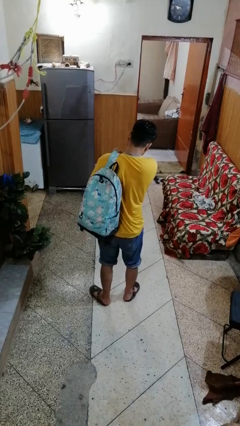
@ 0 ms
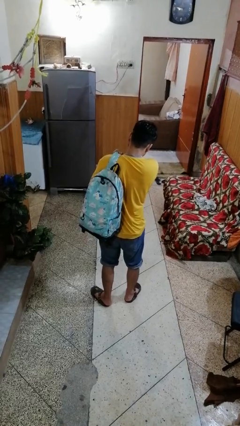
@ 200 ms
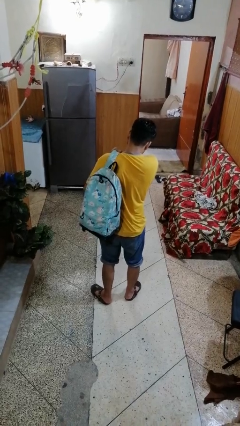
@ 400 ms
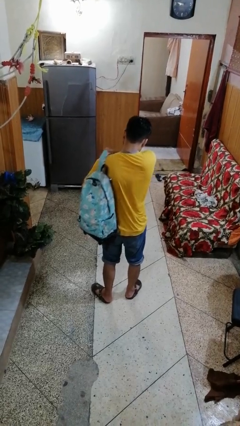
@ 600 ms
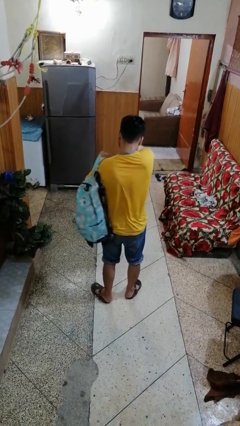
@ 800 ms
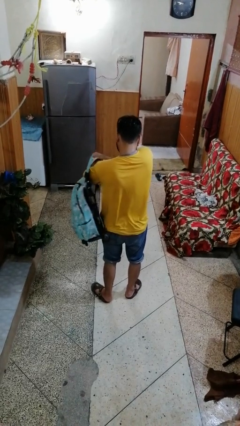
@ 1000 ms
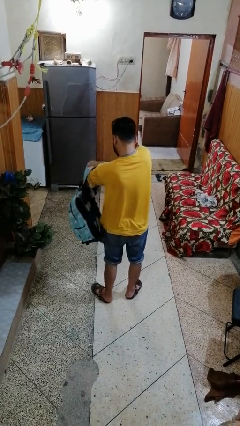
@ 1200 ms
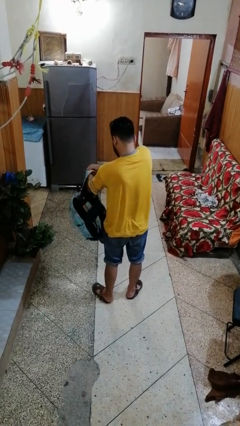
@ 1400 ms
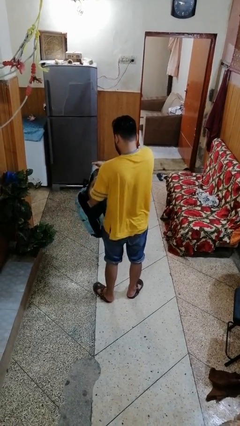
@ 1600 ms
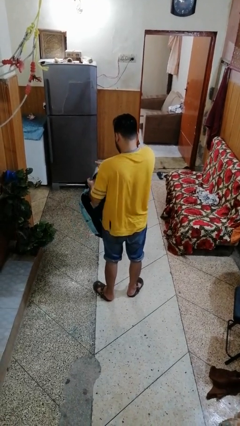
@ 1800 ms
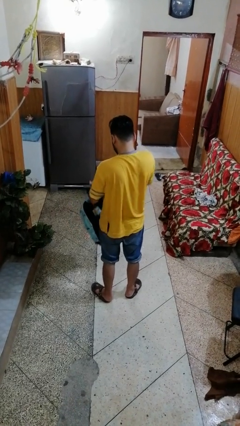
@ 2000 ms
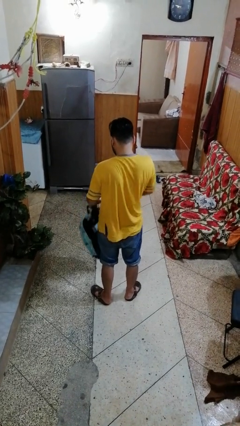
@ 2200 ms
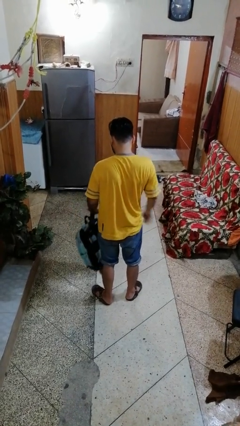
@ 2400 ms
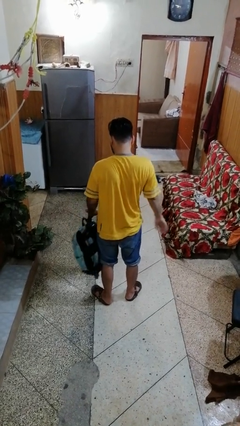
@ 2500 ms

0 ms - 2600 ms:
person takes off backpack

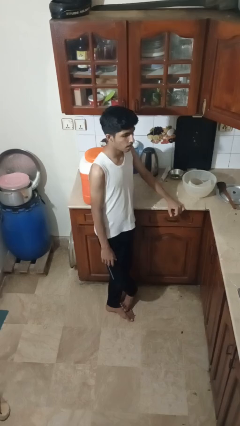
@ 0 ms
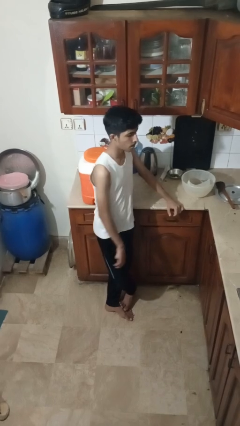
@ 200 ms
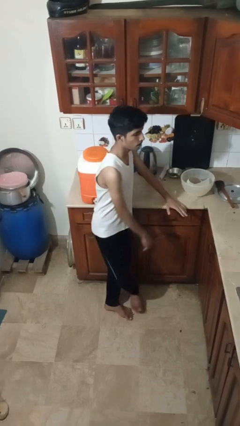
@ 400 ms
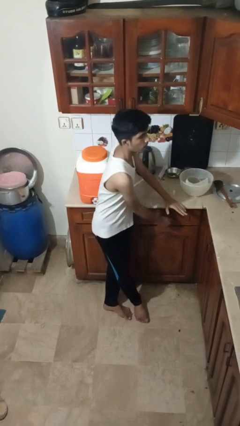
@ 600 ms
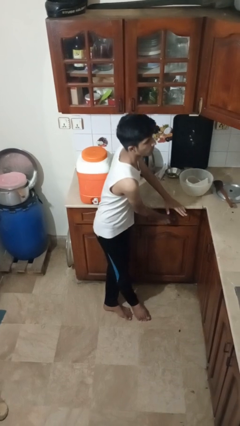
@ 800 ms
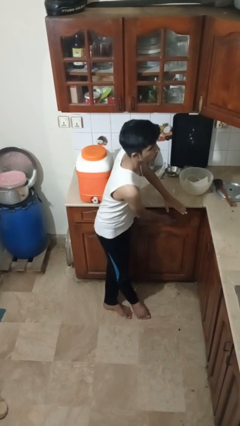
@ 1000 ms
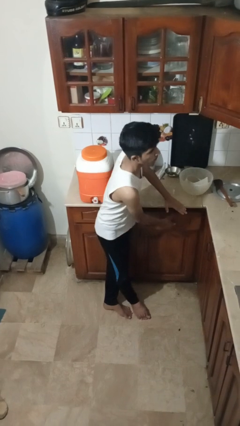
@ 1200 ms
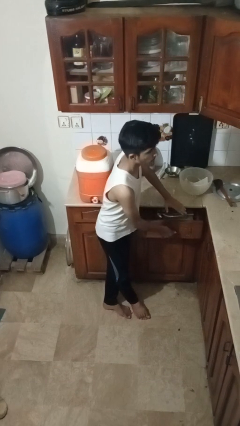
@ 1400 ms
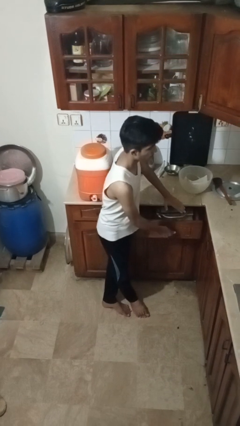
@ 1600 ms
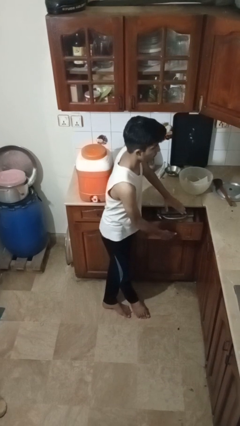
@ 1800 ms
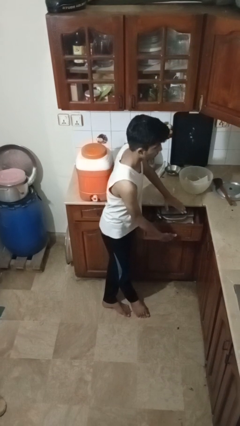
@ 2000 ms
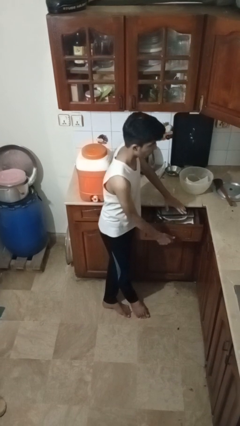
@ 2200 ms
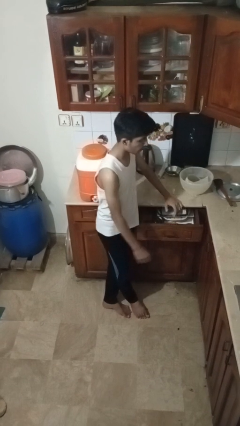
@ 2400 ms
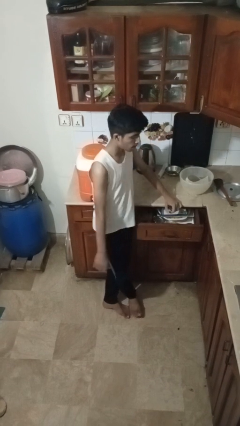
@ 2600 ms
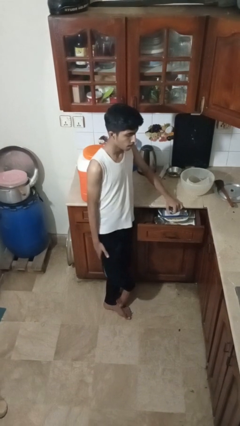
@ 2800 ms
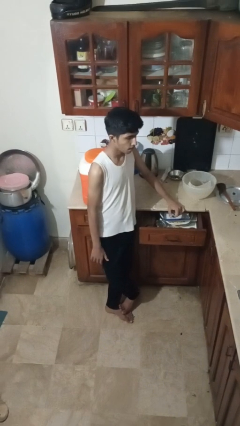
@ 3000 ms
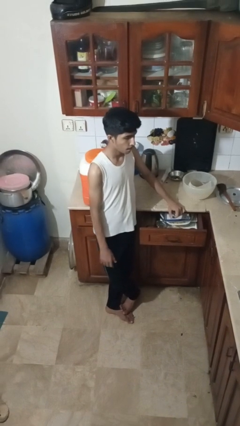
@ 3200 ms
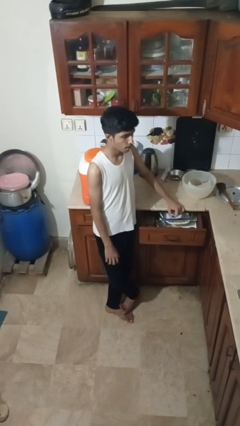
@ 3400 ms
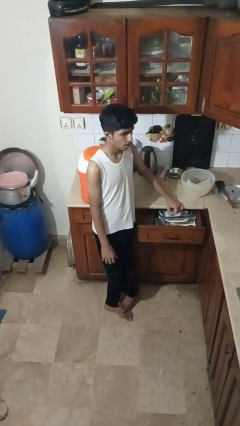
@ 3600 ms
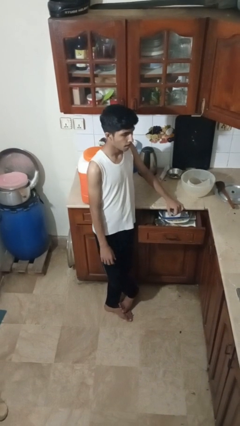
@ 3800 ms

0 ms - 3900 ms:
person opens kitchen drawer

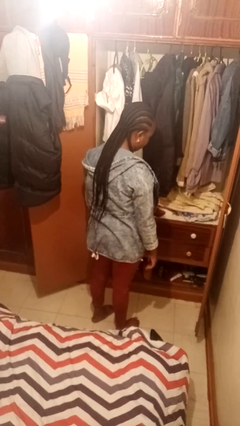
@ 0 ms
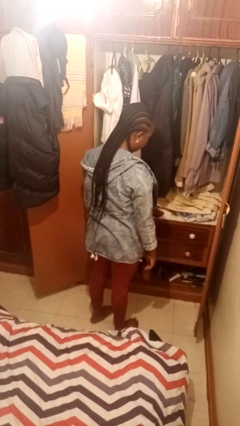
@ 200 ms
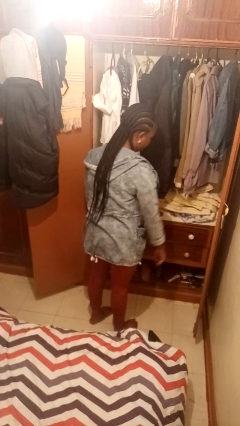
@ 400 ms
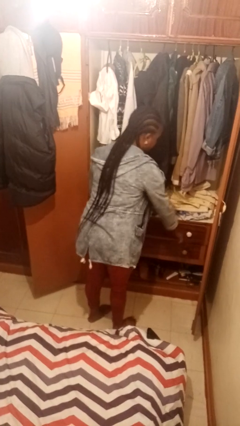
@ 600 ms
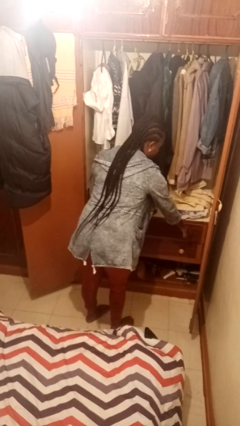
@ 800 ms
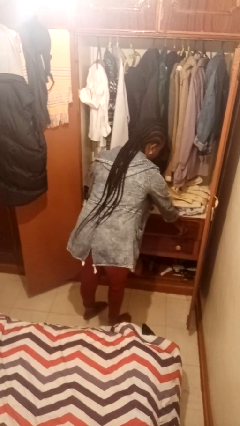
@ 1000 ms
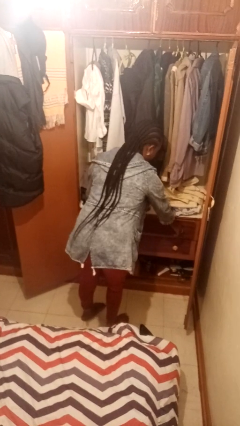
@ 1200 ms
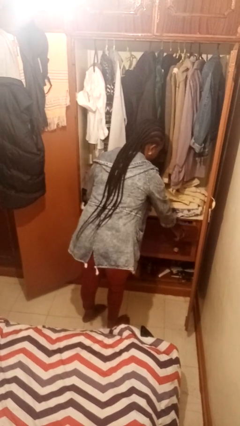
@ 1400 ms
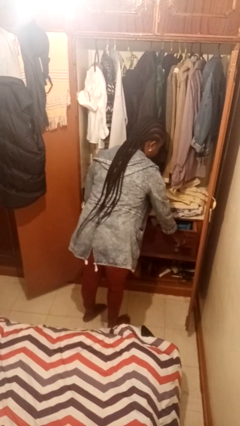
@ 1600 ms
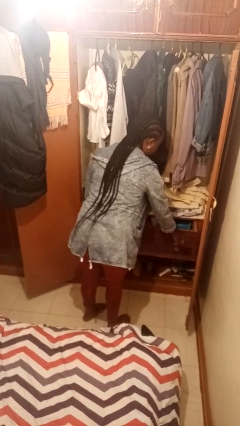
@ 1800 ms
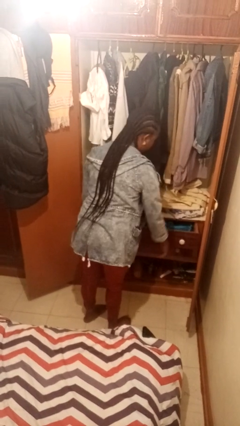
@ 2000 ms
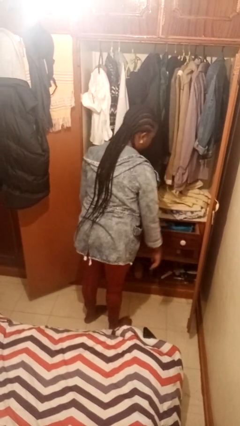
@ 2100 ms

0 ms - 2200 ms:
person opens dresser drawer

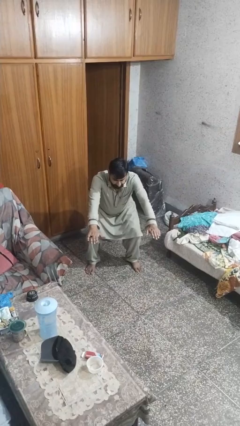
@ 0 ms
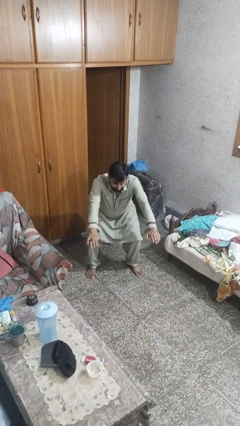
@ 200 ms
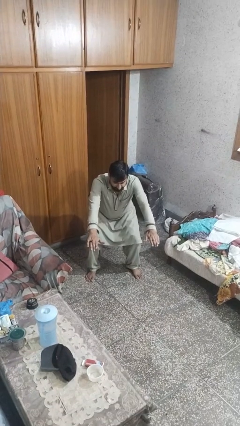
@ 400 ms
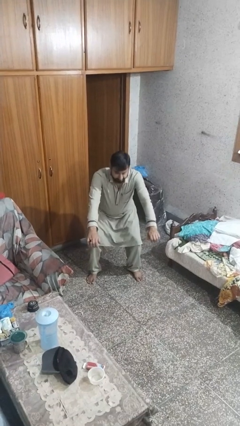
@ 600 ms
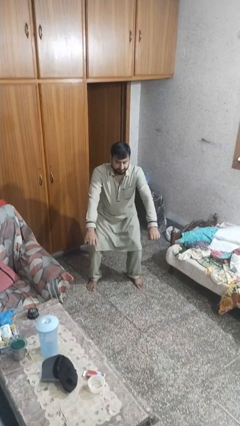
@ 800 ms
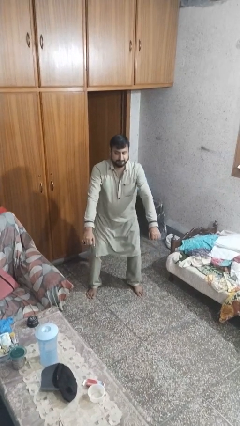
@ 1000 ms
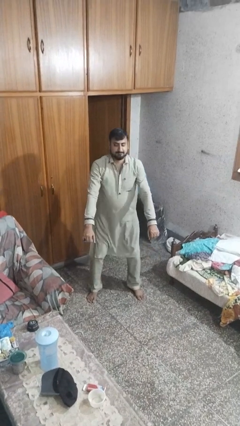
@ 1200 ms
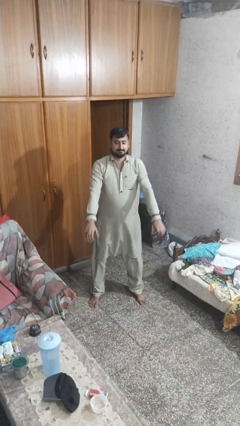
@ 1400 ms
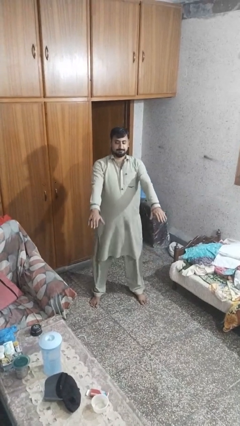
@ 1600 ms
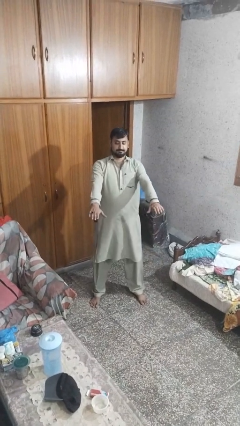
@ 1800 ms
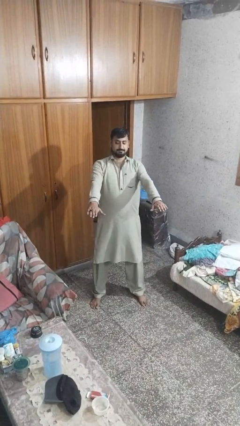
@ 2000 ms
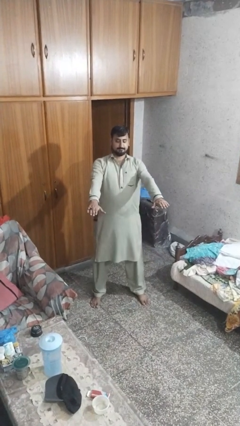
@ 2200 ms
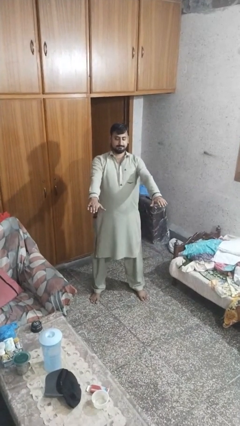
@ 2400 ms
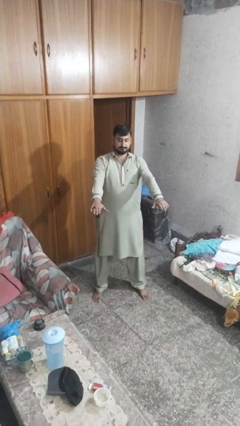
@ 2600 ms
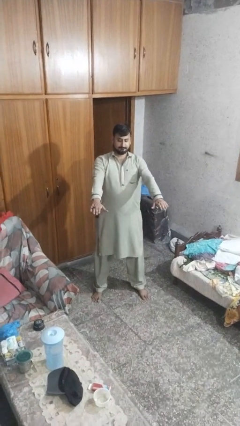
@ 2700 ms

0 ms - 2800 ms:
person stands up

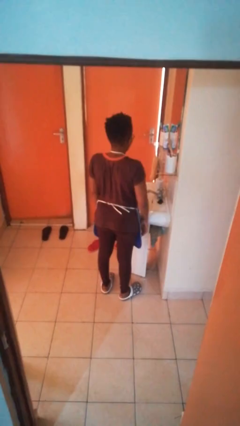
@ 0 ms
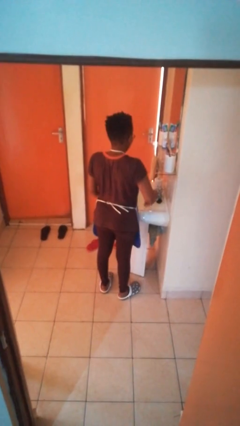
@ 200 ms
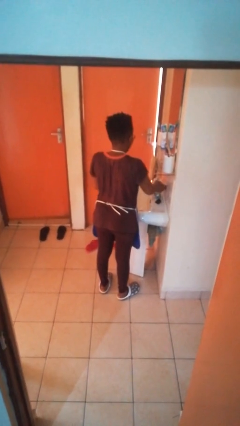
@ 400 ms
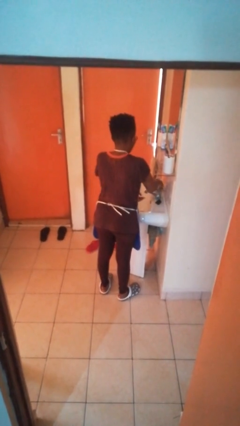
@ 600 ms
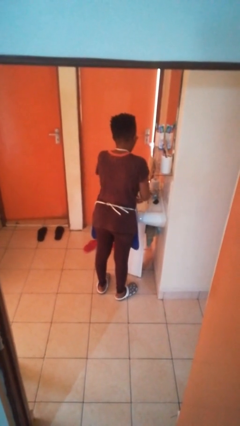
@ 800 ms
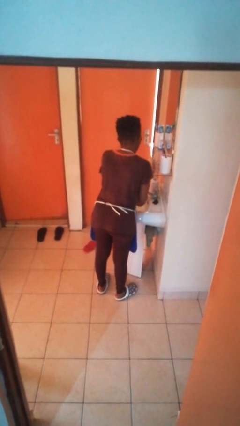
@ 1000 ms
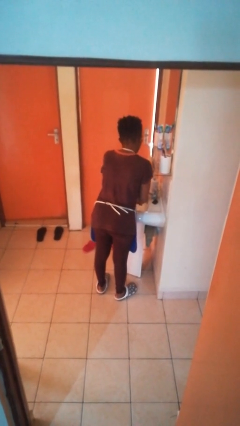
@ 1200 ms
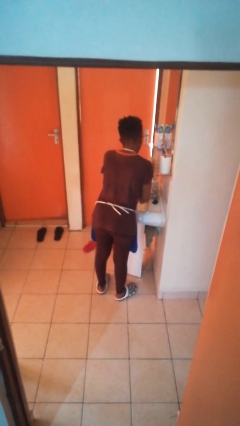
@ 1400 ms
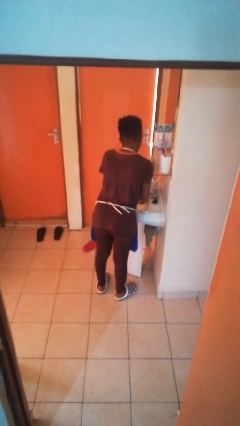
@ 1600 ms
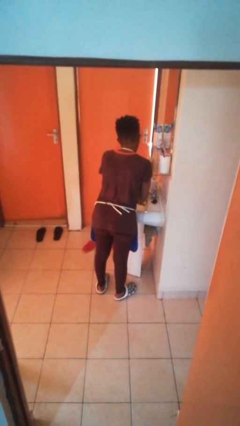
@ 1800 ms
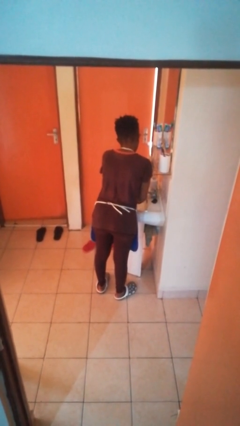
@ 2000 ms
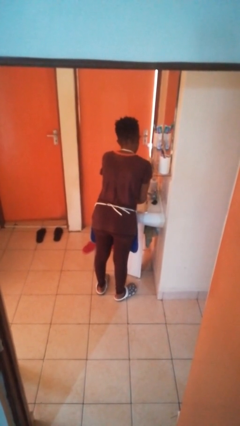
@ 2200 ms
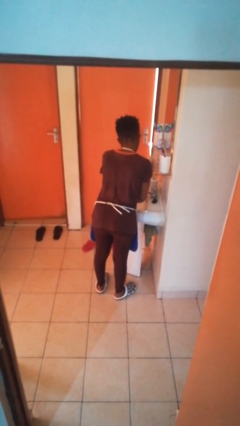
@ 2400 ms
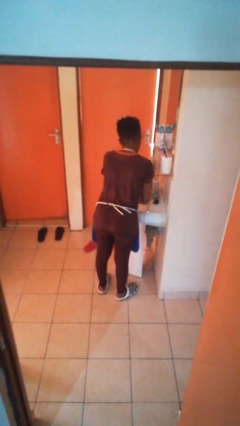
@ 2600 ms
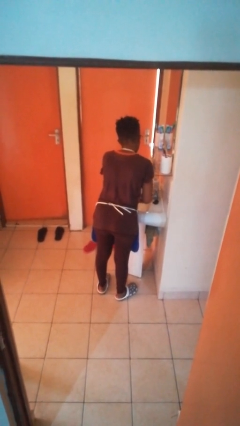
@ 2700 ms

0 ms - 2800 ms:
person washes hands

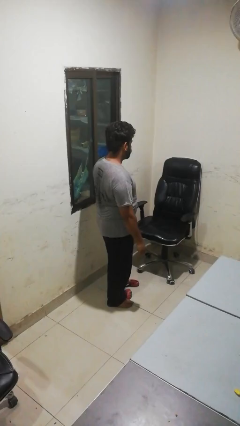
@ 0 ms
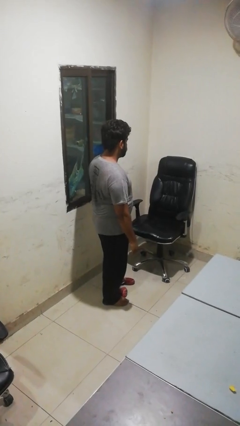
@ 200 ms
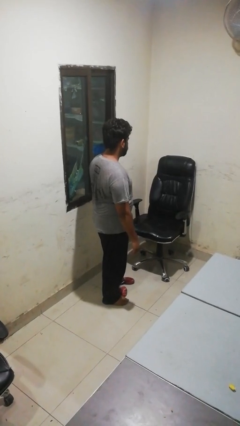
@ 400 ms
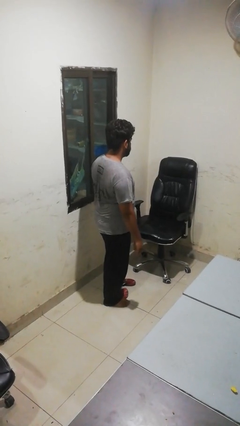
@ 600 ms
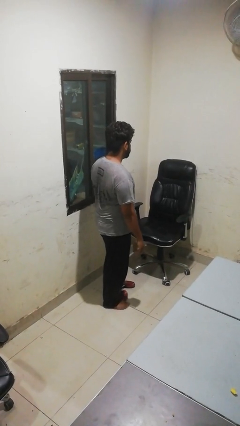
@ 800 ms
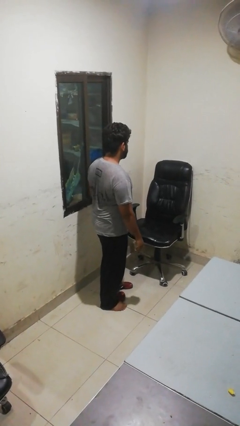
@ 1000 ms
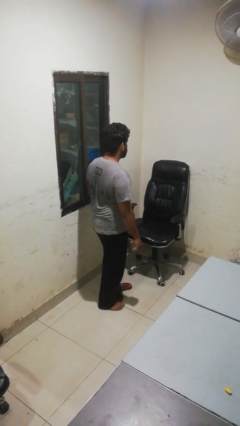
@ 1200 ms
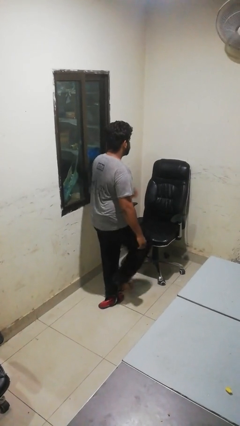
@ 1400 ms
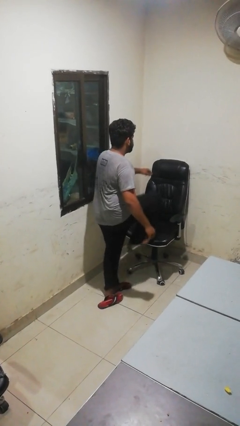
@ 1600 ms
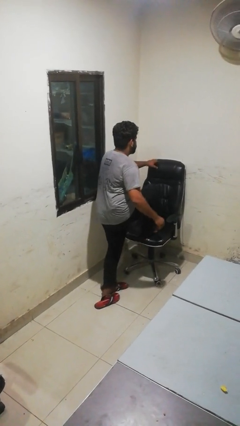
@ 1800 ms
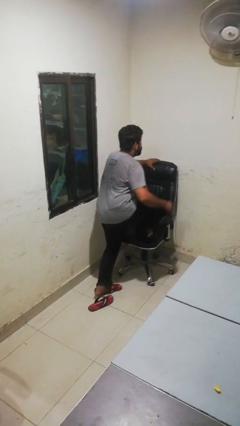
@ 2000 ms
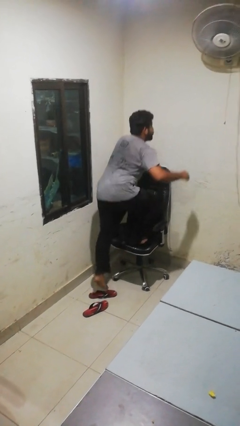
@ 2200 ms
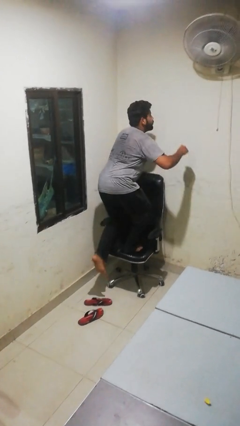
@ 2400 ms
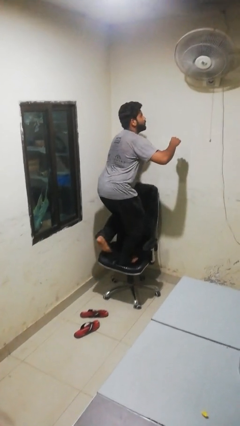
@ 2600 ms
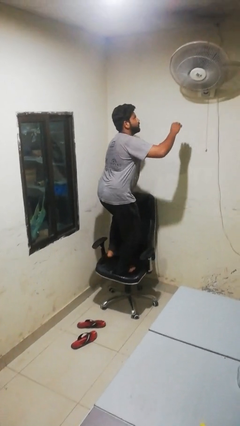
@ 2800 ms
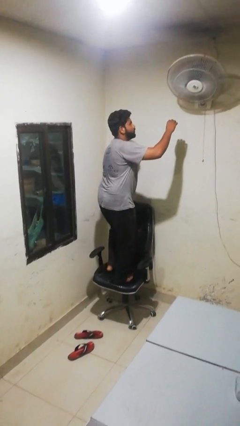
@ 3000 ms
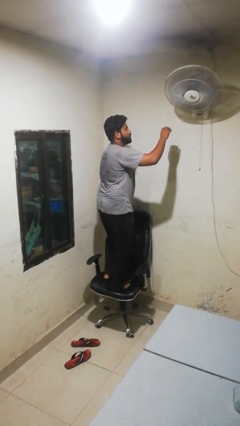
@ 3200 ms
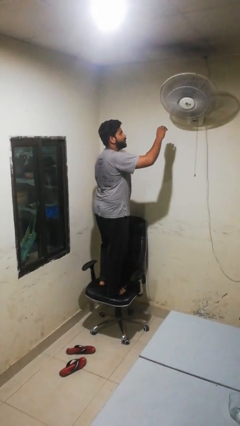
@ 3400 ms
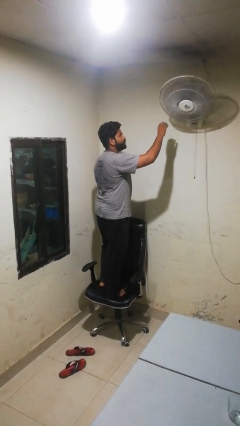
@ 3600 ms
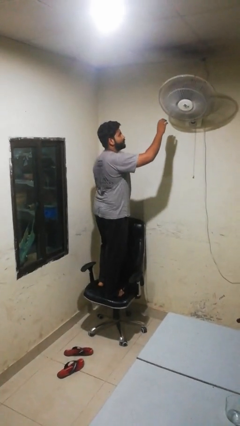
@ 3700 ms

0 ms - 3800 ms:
person climbs on chair
